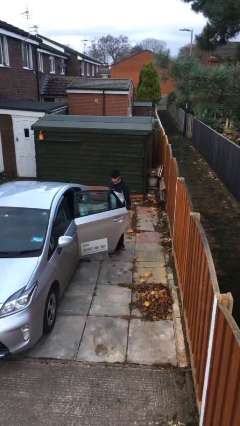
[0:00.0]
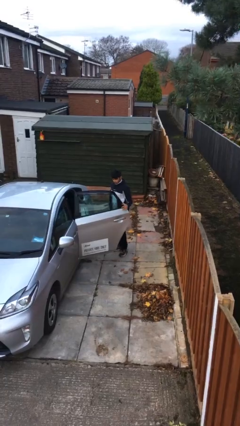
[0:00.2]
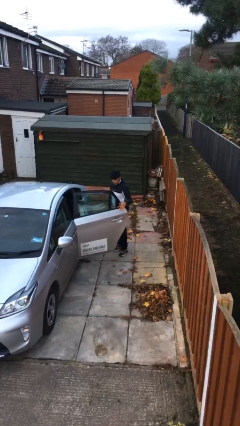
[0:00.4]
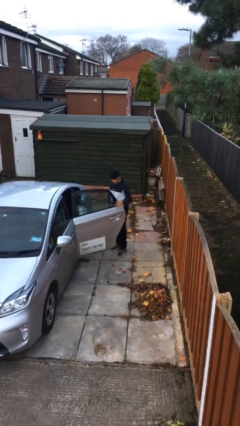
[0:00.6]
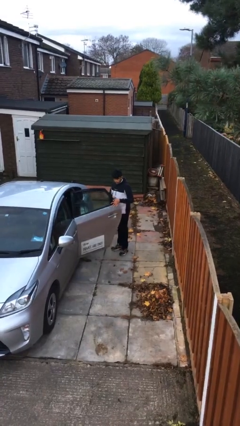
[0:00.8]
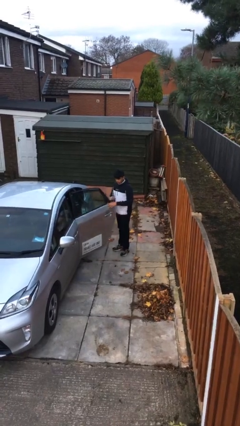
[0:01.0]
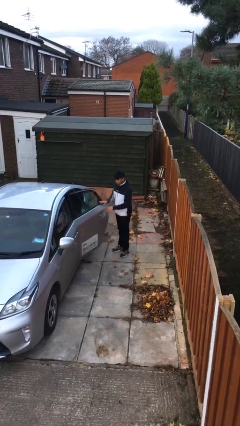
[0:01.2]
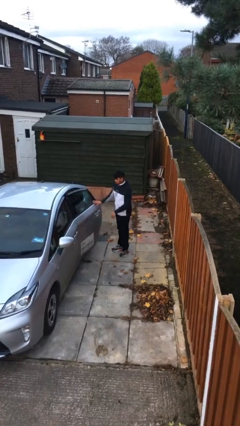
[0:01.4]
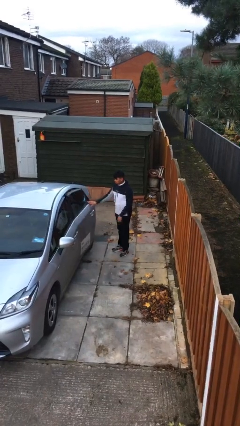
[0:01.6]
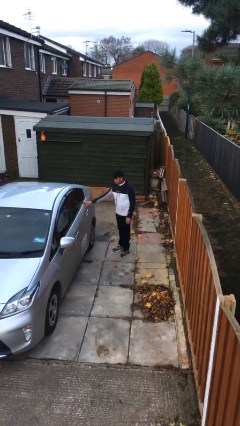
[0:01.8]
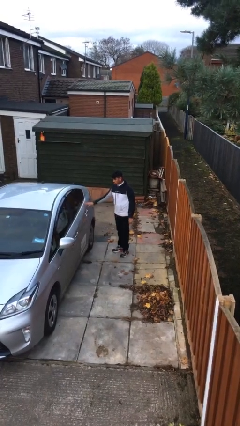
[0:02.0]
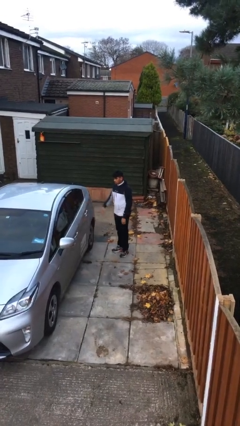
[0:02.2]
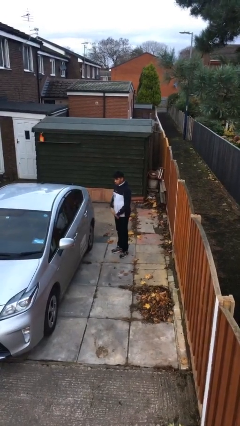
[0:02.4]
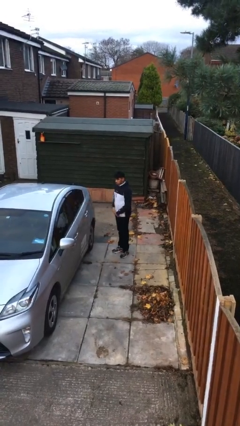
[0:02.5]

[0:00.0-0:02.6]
person closes car door

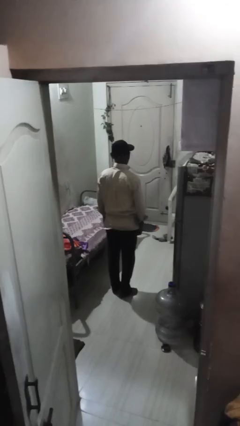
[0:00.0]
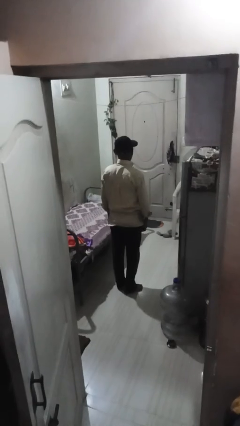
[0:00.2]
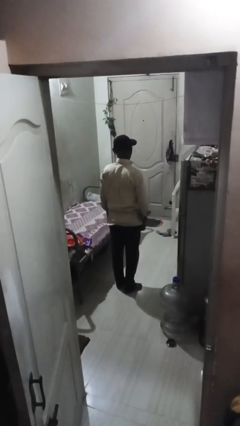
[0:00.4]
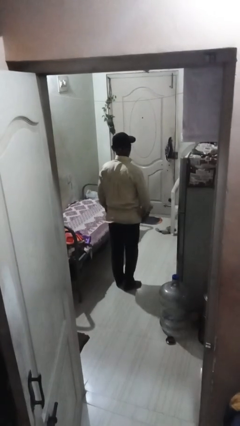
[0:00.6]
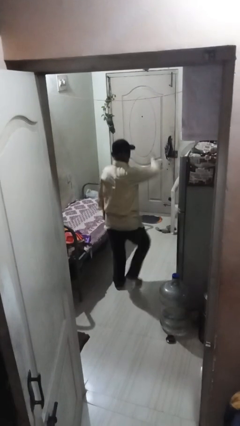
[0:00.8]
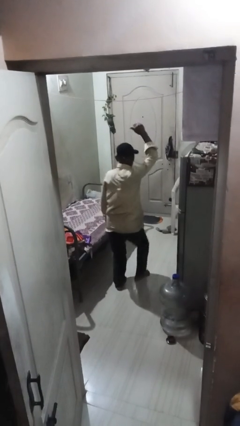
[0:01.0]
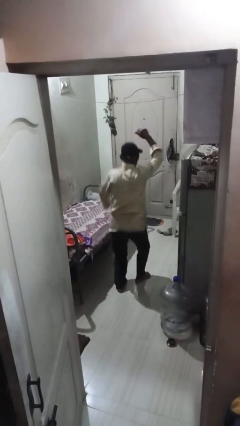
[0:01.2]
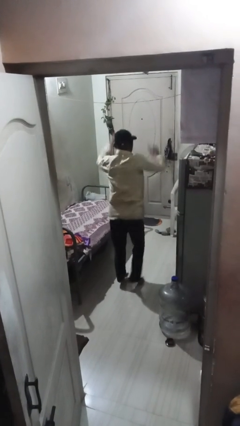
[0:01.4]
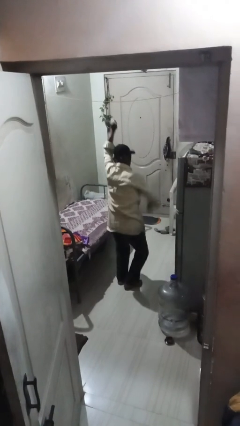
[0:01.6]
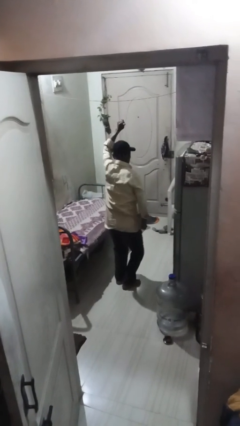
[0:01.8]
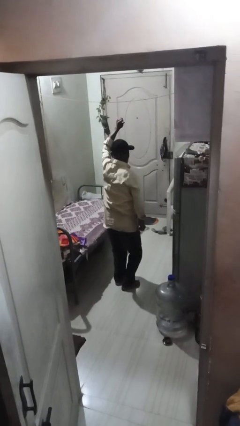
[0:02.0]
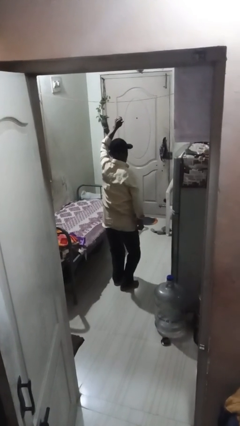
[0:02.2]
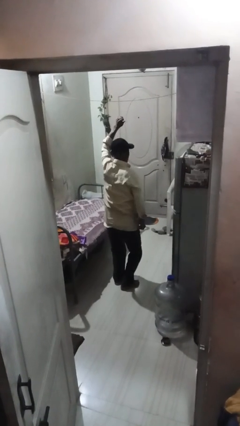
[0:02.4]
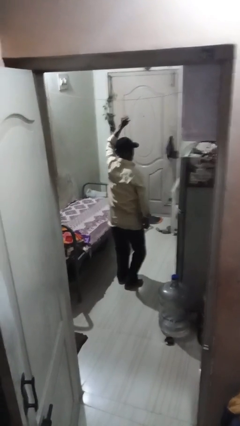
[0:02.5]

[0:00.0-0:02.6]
person dances in place

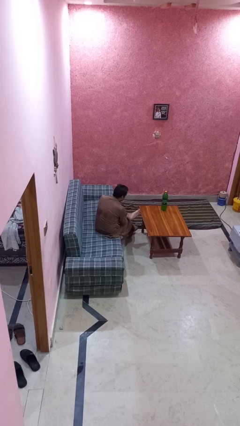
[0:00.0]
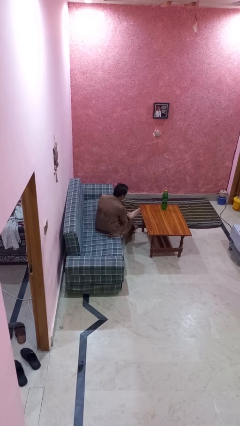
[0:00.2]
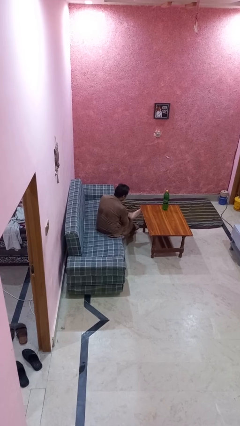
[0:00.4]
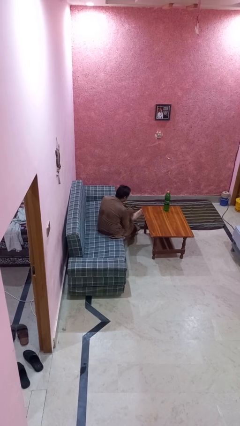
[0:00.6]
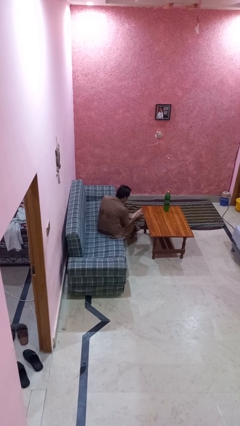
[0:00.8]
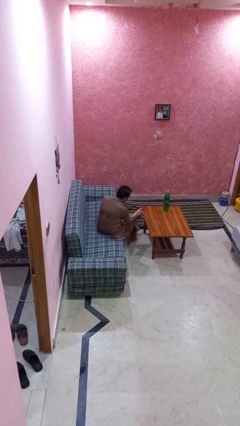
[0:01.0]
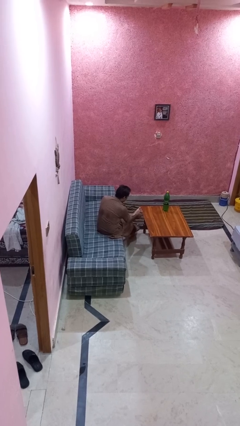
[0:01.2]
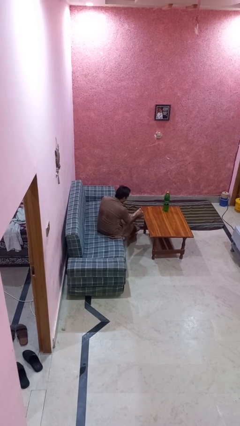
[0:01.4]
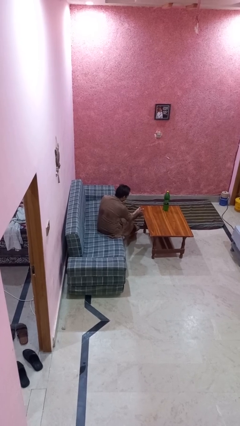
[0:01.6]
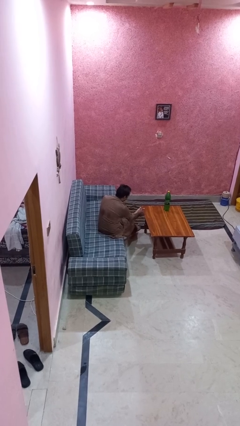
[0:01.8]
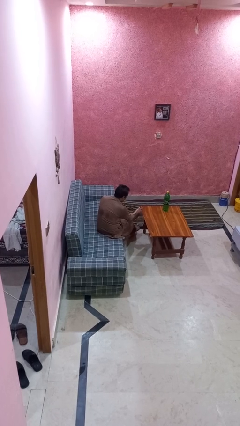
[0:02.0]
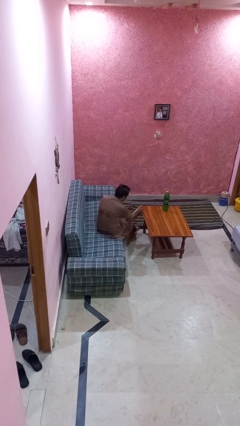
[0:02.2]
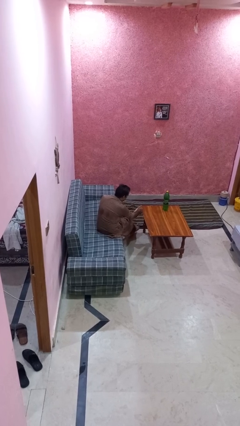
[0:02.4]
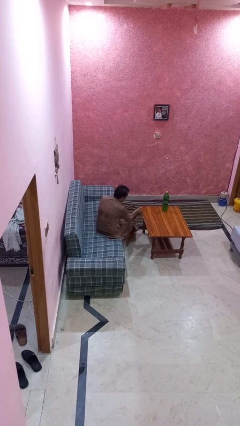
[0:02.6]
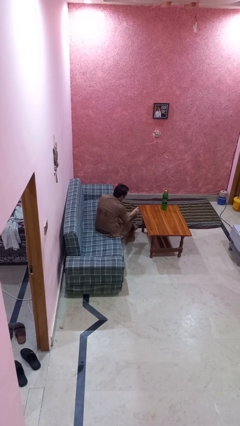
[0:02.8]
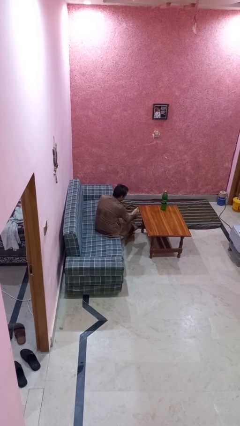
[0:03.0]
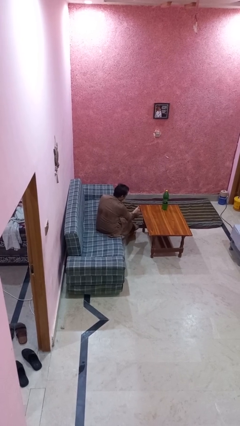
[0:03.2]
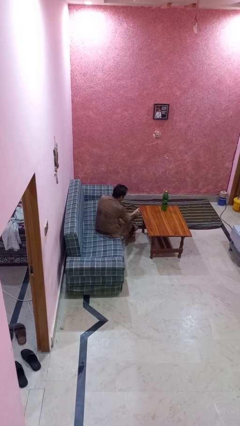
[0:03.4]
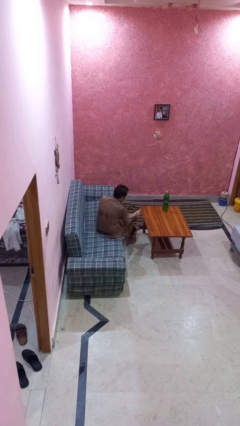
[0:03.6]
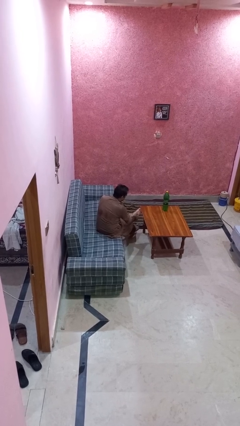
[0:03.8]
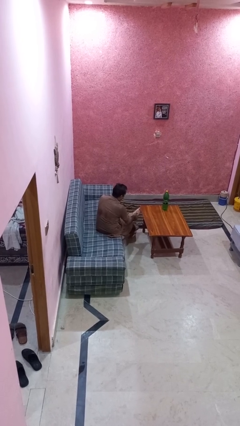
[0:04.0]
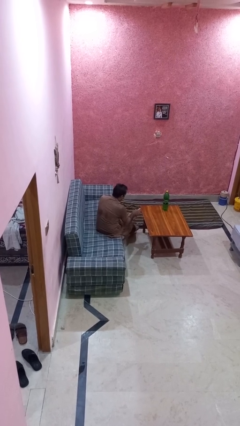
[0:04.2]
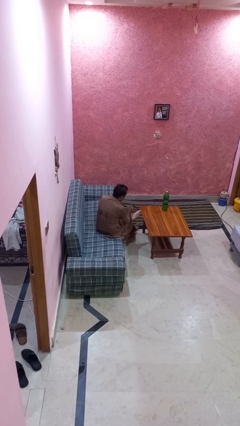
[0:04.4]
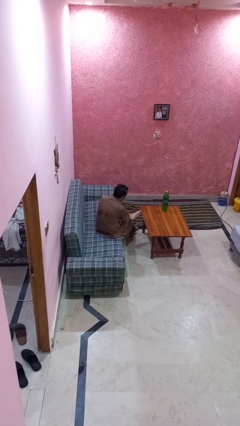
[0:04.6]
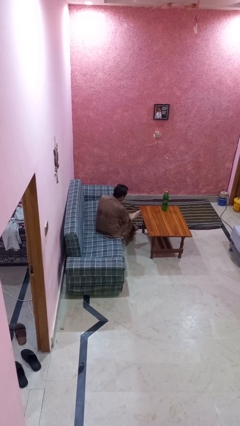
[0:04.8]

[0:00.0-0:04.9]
person rubs foot

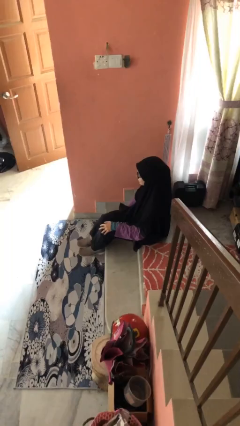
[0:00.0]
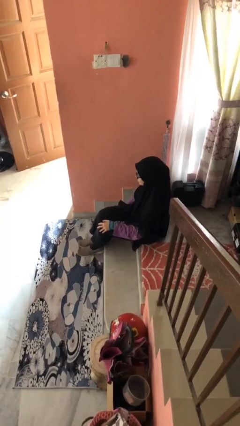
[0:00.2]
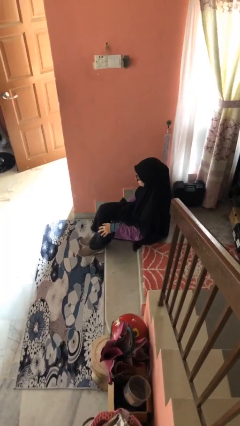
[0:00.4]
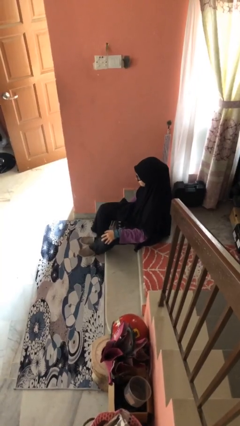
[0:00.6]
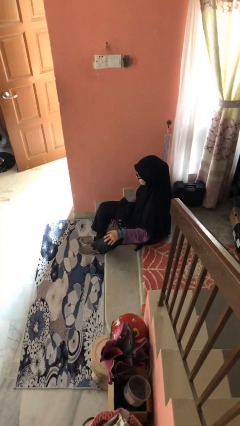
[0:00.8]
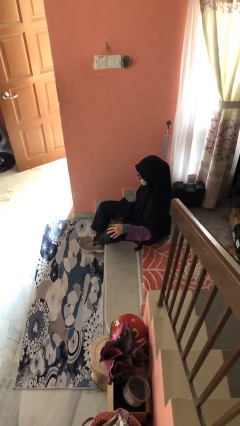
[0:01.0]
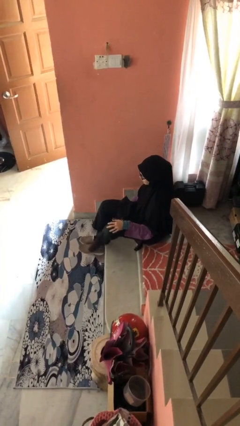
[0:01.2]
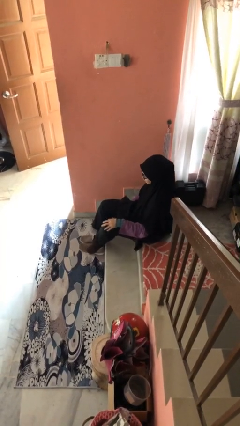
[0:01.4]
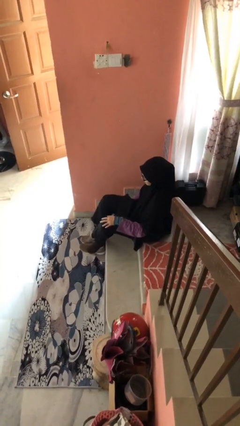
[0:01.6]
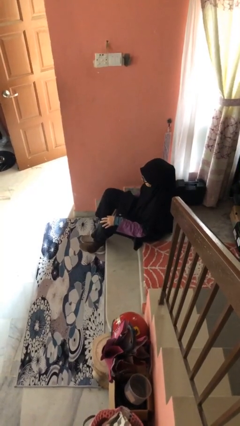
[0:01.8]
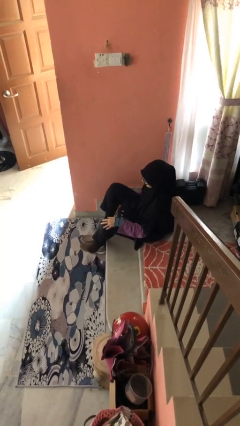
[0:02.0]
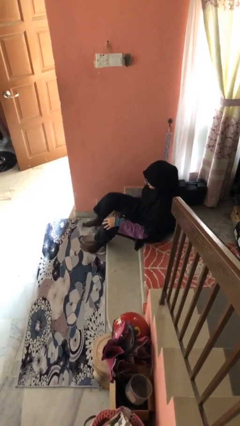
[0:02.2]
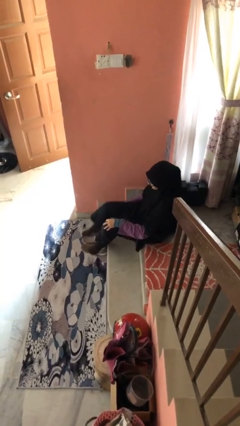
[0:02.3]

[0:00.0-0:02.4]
person takes off shoes

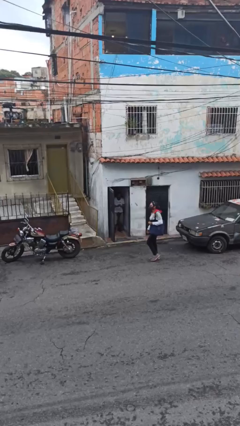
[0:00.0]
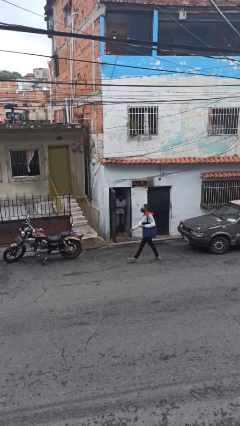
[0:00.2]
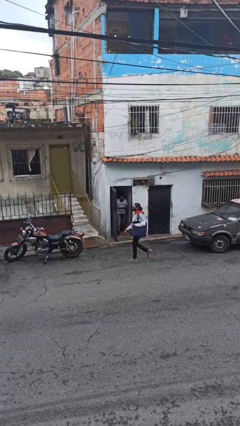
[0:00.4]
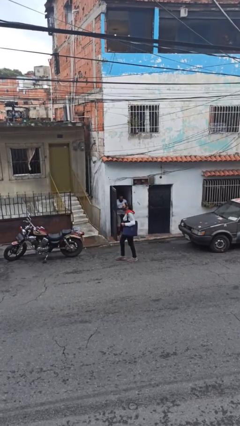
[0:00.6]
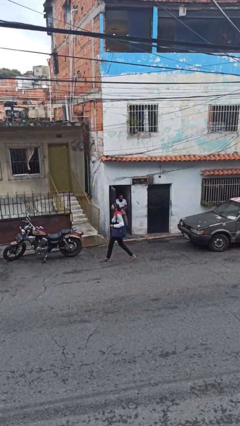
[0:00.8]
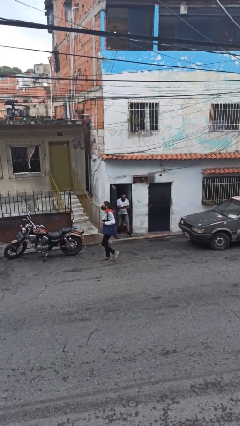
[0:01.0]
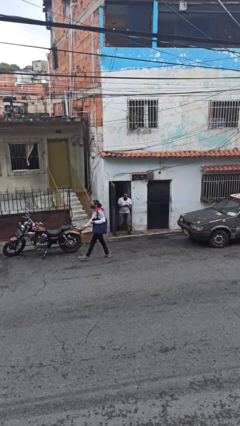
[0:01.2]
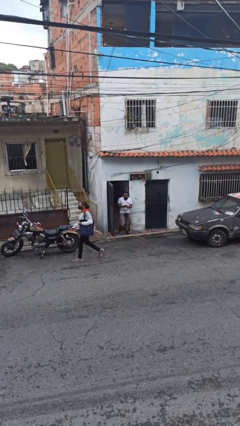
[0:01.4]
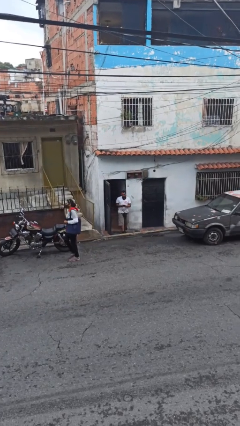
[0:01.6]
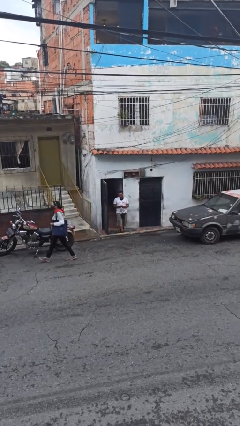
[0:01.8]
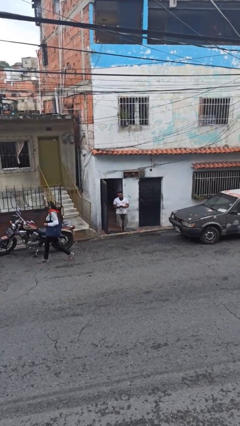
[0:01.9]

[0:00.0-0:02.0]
person enters scene through structure

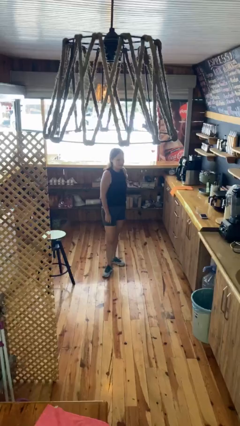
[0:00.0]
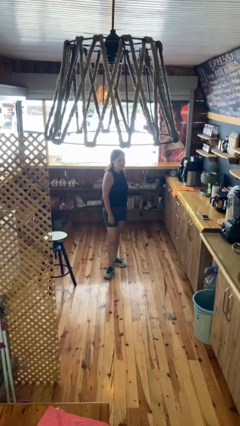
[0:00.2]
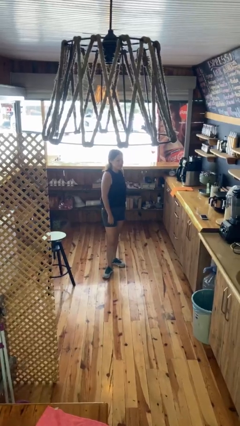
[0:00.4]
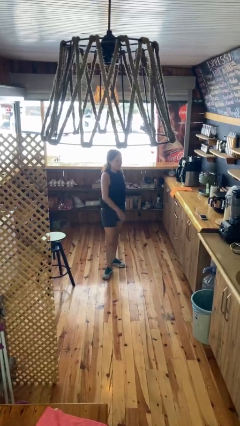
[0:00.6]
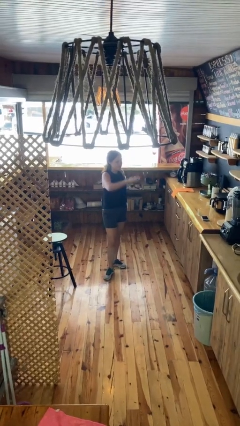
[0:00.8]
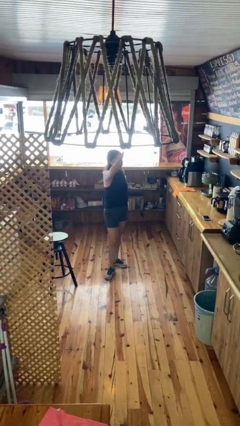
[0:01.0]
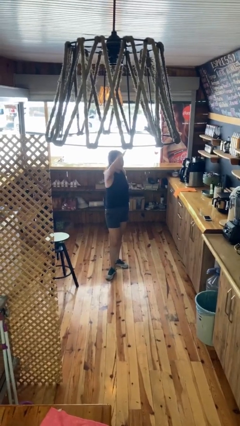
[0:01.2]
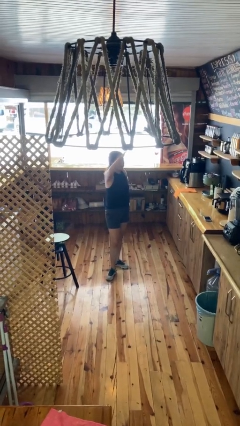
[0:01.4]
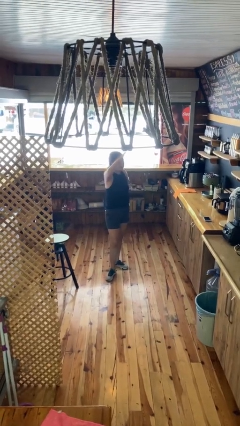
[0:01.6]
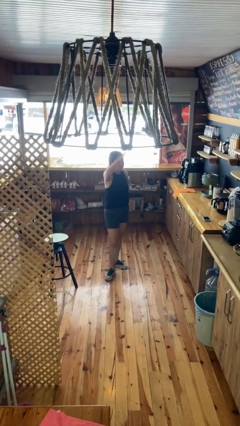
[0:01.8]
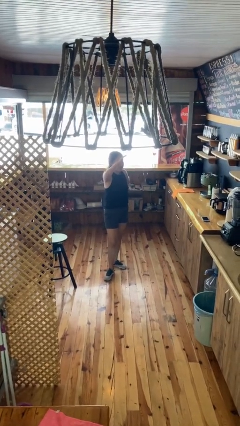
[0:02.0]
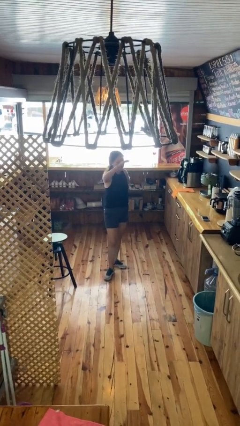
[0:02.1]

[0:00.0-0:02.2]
person salutes

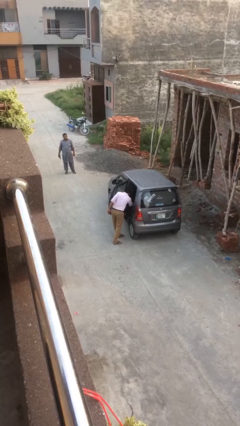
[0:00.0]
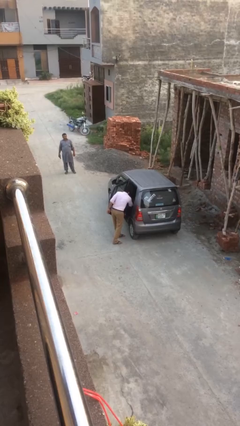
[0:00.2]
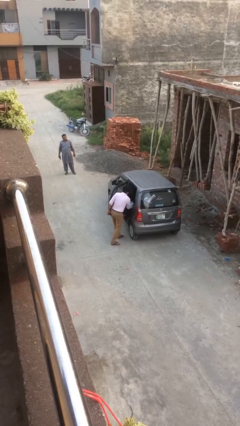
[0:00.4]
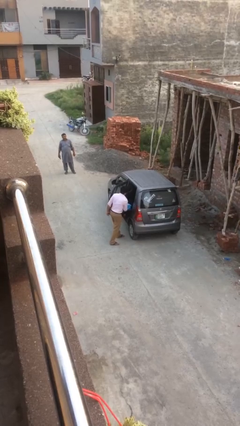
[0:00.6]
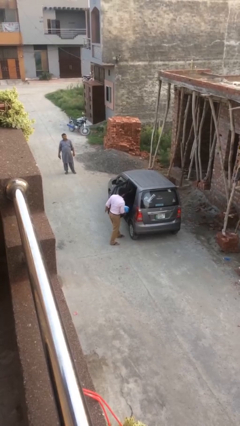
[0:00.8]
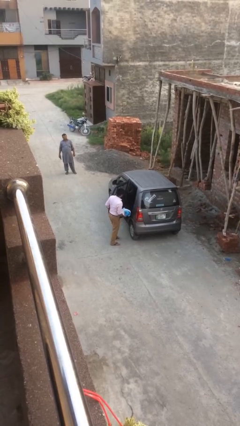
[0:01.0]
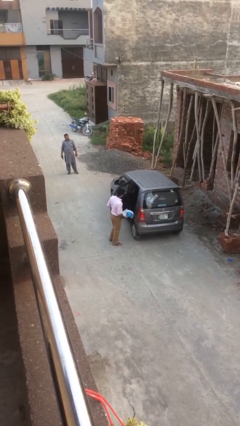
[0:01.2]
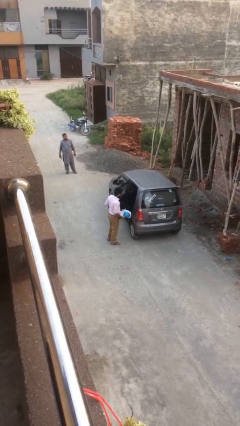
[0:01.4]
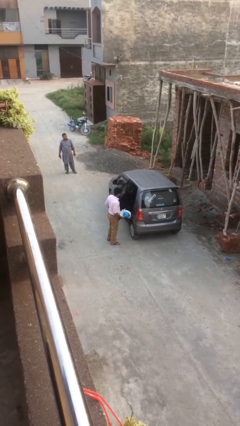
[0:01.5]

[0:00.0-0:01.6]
person unloads car
